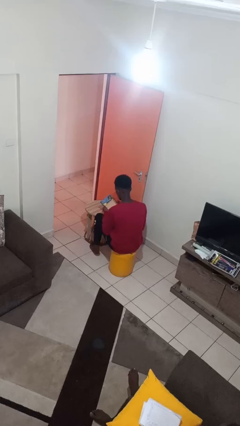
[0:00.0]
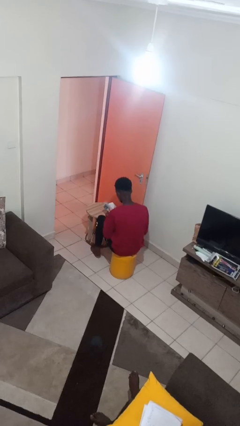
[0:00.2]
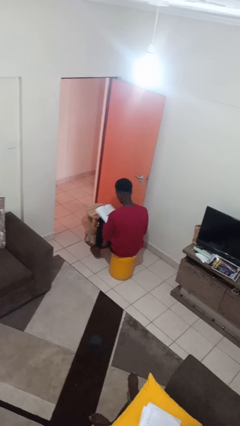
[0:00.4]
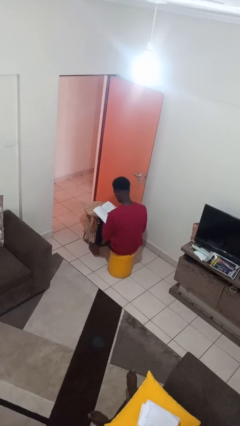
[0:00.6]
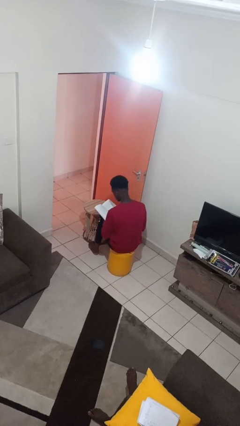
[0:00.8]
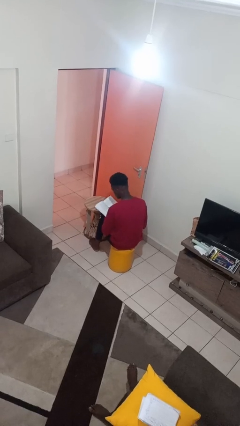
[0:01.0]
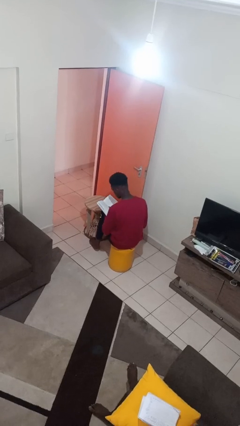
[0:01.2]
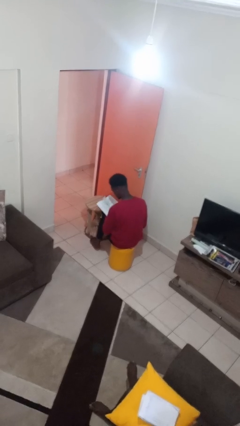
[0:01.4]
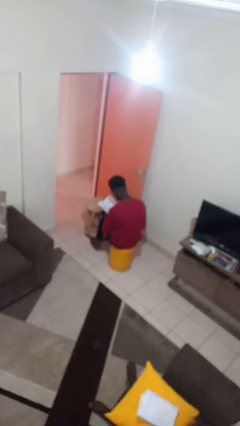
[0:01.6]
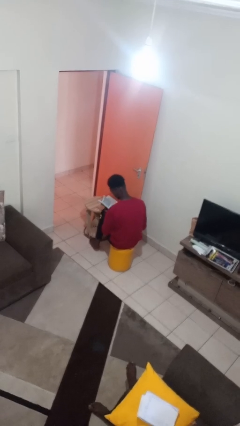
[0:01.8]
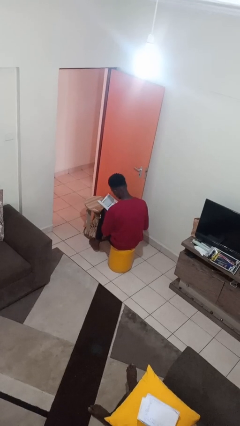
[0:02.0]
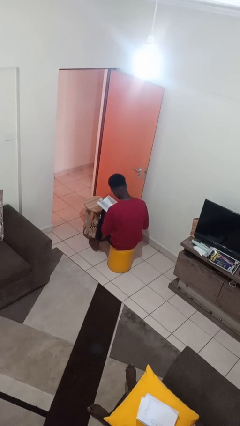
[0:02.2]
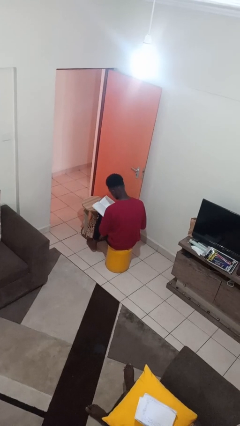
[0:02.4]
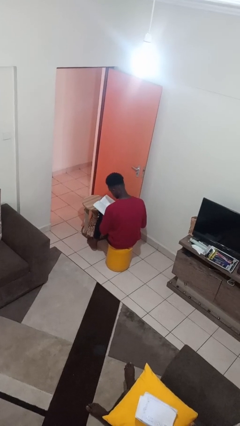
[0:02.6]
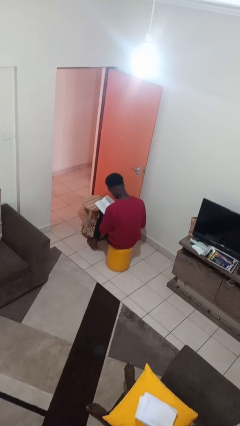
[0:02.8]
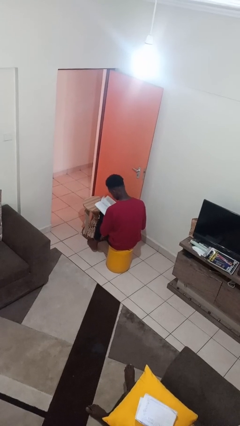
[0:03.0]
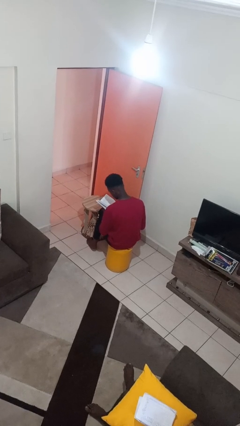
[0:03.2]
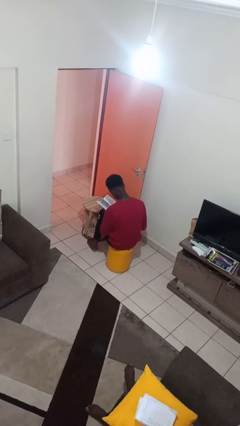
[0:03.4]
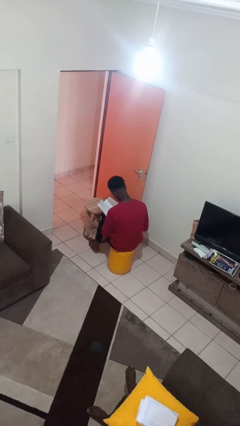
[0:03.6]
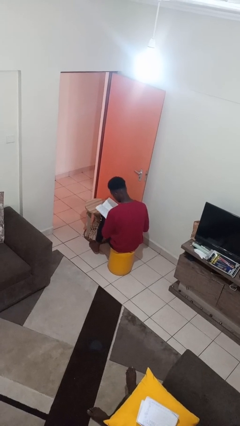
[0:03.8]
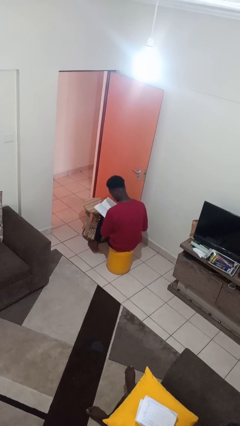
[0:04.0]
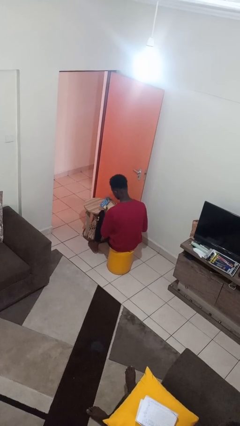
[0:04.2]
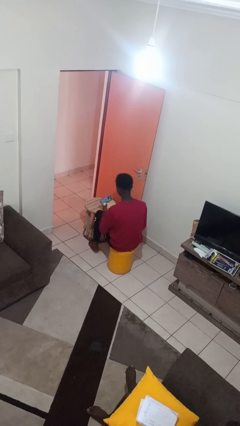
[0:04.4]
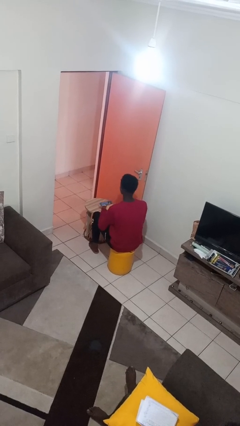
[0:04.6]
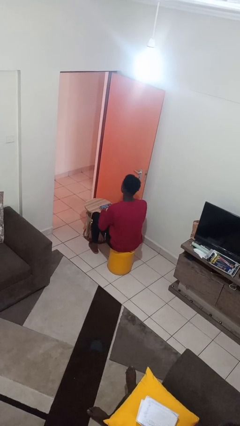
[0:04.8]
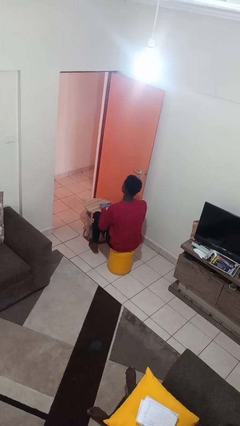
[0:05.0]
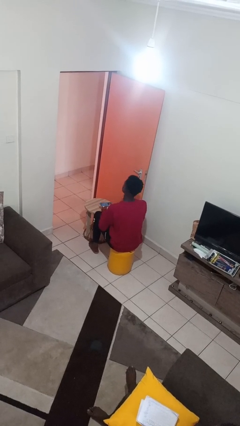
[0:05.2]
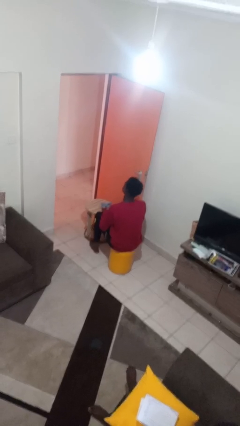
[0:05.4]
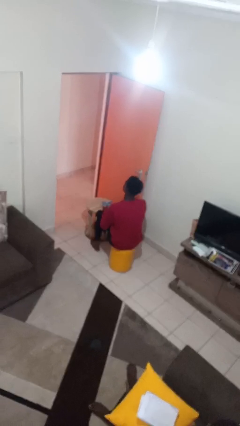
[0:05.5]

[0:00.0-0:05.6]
person reads book

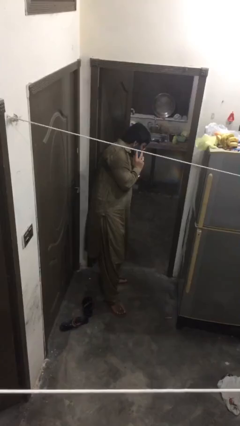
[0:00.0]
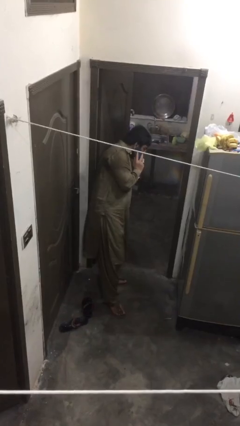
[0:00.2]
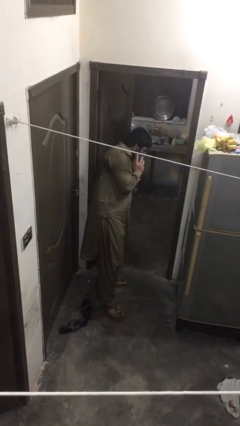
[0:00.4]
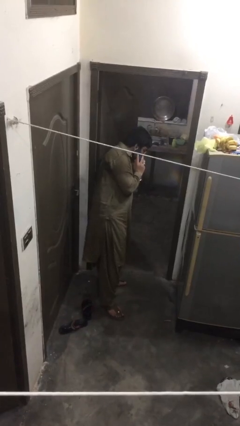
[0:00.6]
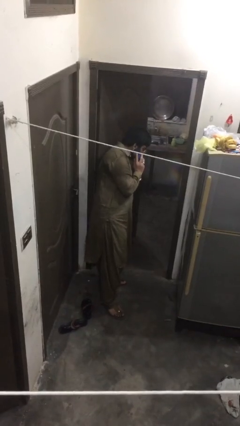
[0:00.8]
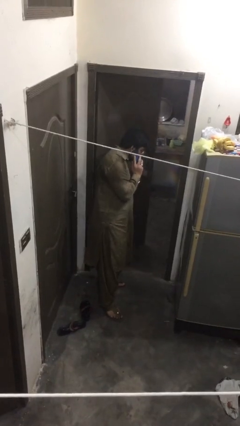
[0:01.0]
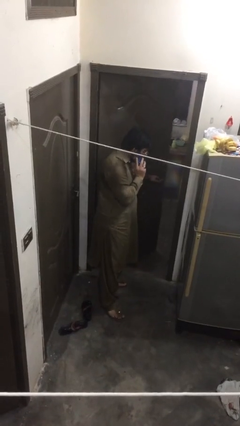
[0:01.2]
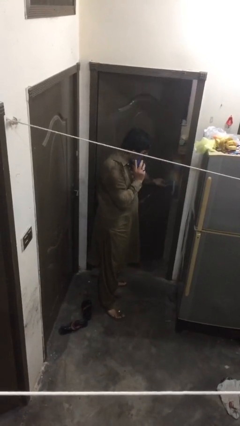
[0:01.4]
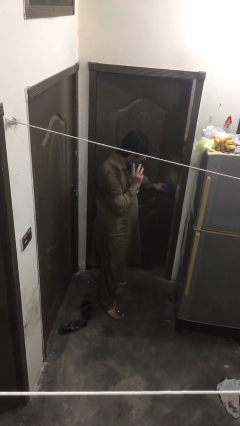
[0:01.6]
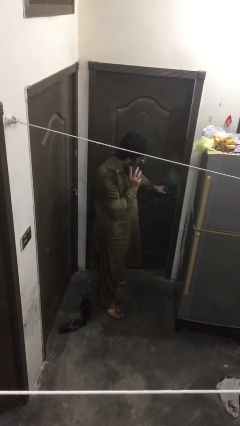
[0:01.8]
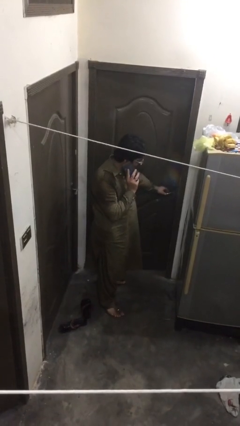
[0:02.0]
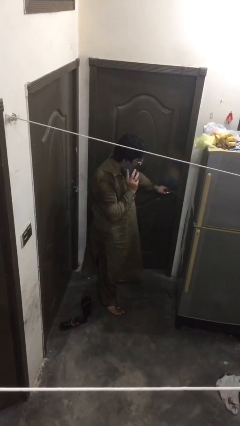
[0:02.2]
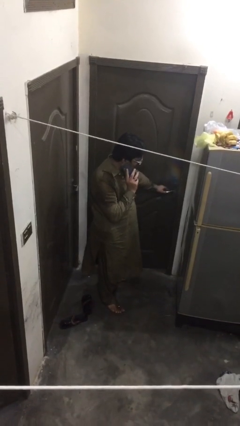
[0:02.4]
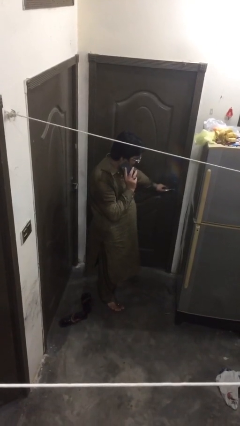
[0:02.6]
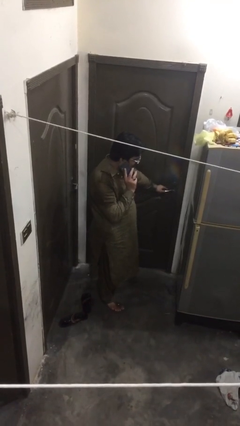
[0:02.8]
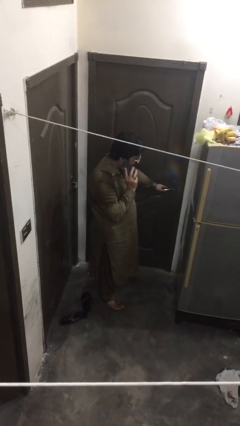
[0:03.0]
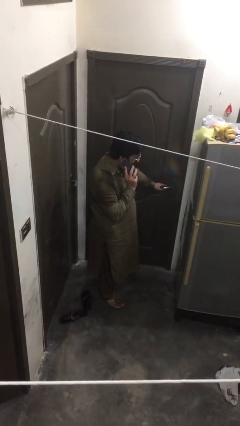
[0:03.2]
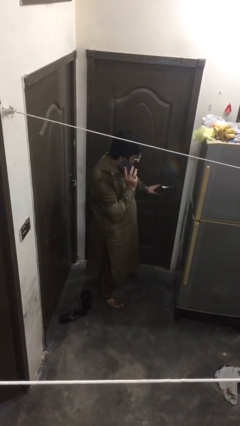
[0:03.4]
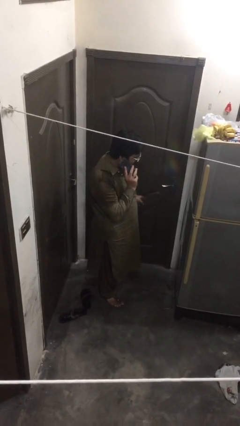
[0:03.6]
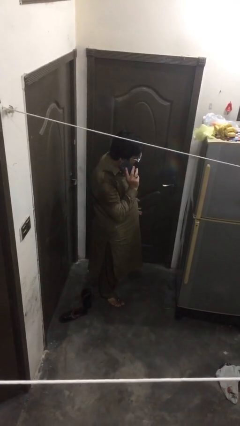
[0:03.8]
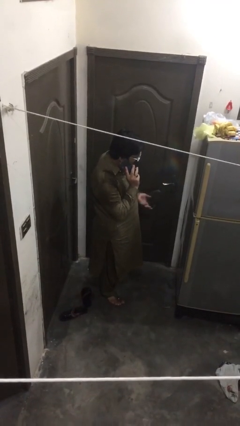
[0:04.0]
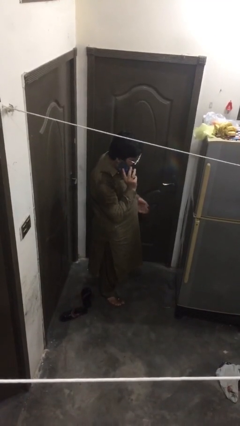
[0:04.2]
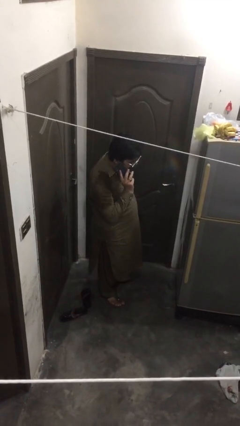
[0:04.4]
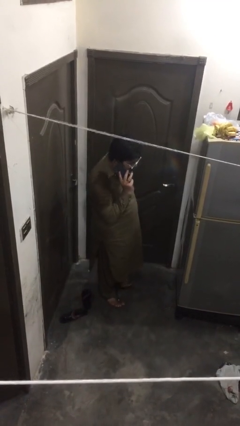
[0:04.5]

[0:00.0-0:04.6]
person closes facility door

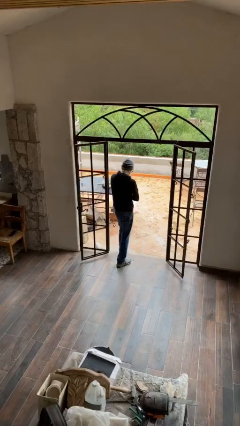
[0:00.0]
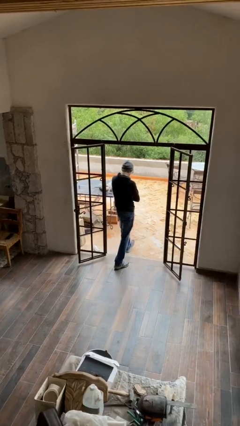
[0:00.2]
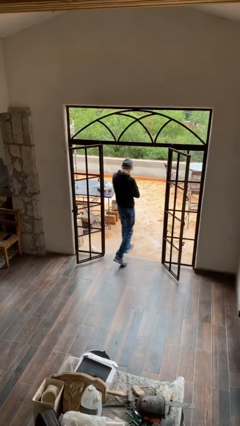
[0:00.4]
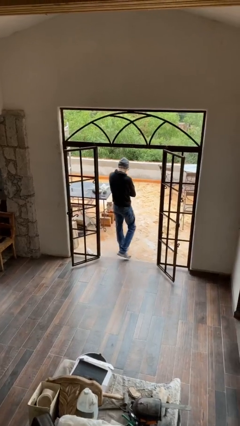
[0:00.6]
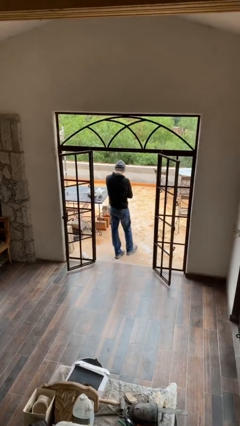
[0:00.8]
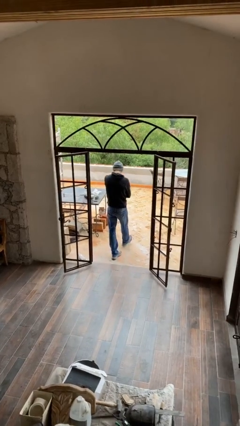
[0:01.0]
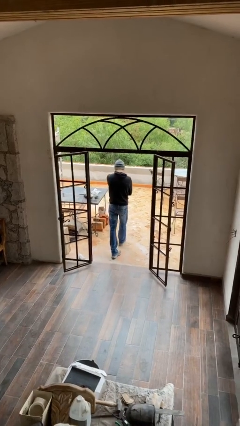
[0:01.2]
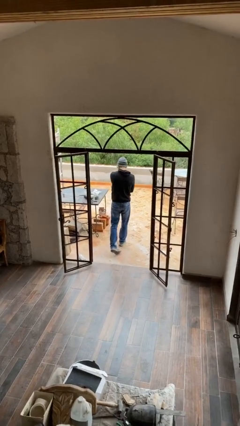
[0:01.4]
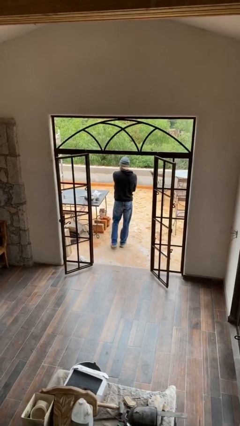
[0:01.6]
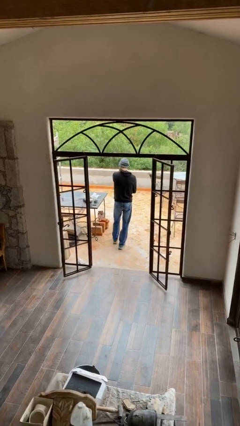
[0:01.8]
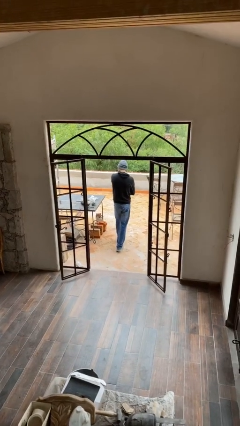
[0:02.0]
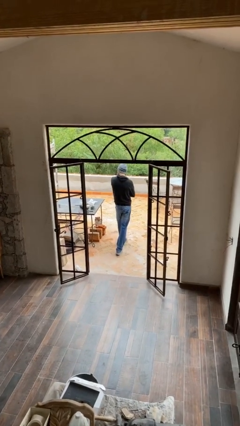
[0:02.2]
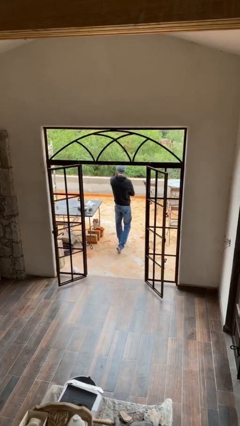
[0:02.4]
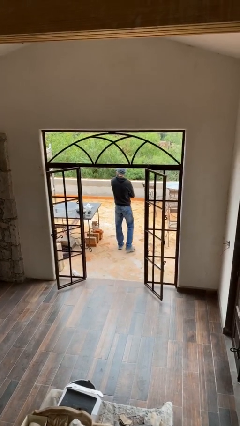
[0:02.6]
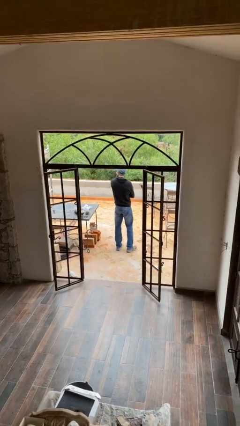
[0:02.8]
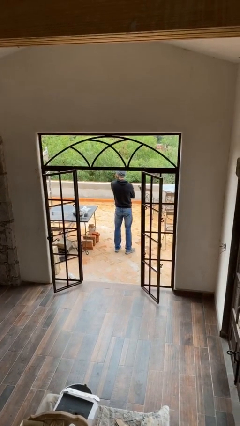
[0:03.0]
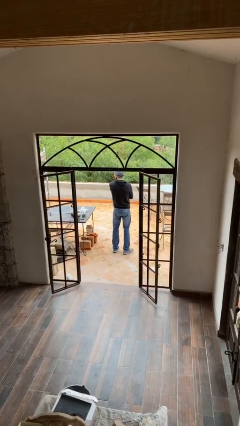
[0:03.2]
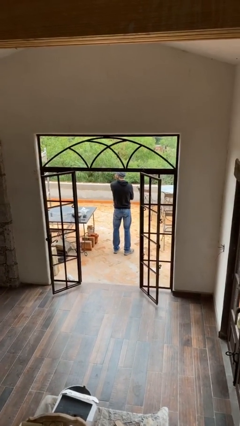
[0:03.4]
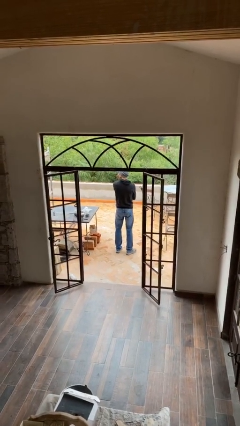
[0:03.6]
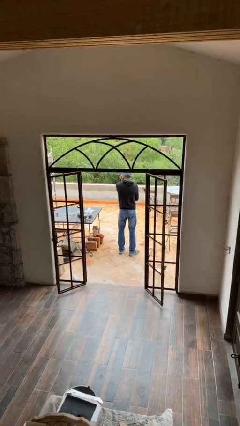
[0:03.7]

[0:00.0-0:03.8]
person exits scene through structure

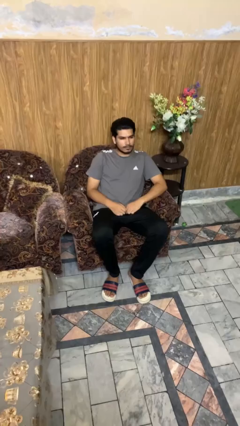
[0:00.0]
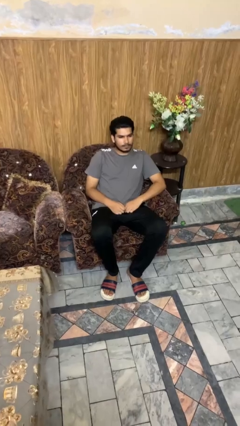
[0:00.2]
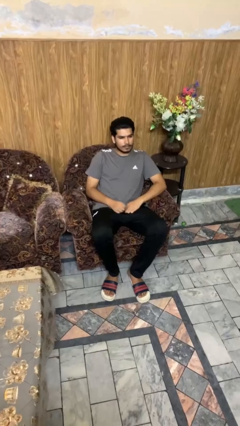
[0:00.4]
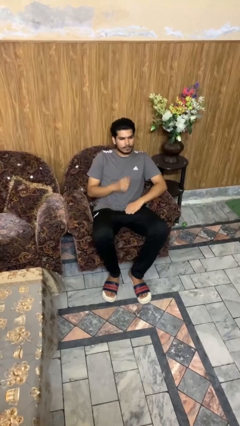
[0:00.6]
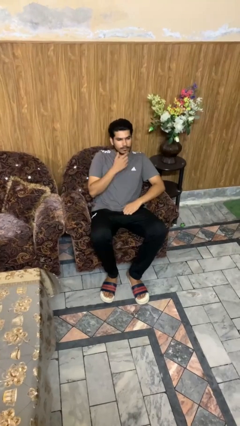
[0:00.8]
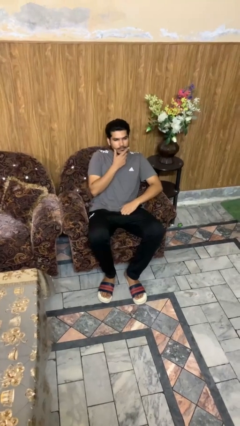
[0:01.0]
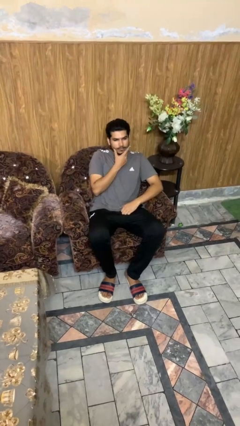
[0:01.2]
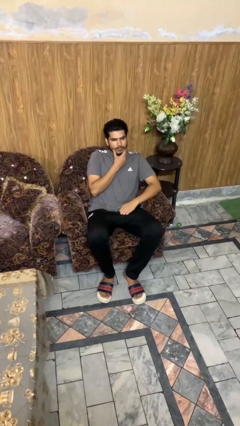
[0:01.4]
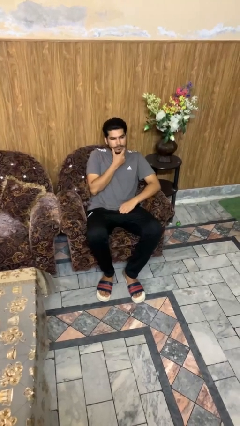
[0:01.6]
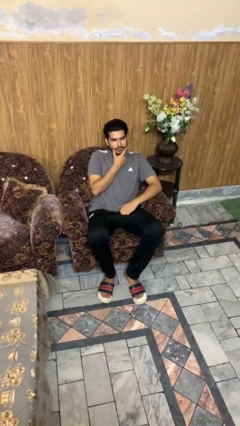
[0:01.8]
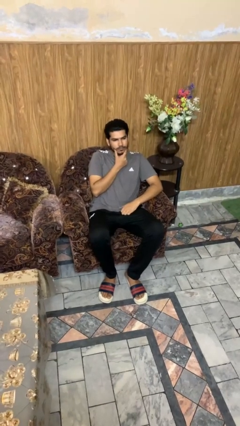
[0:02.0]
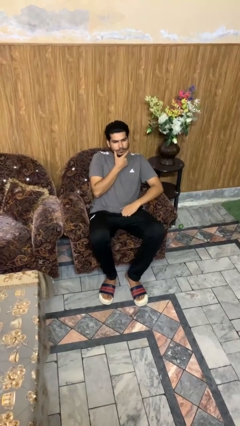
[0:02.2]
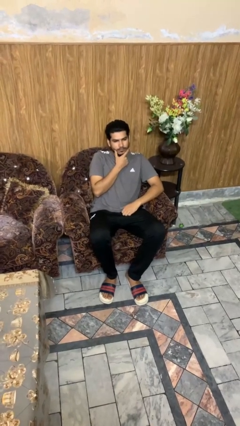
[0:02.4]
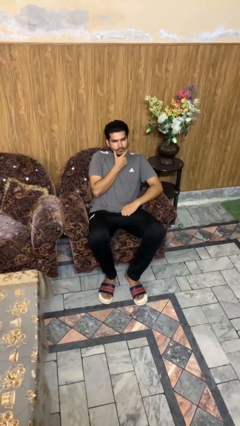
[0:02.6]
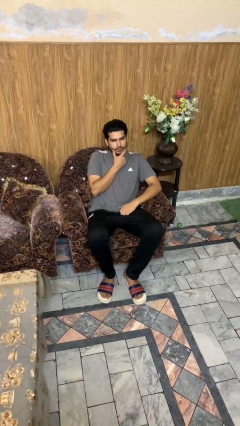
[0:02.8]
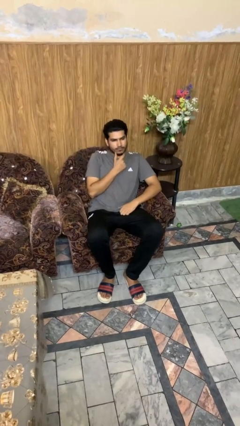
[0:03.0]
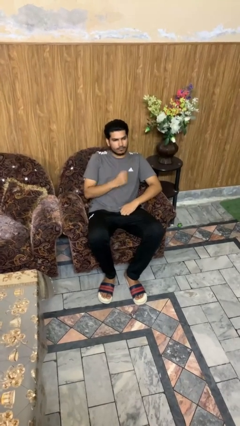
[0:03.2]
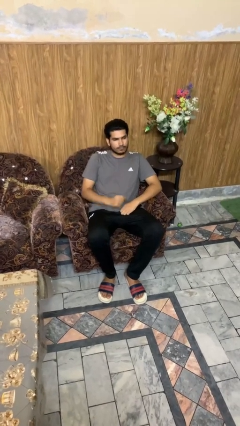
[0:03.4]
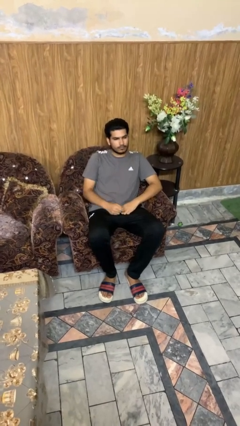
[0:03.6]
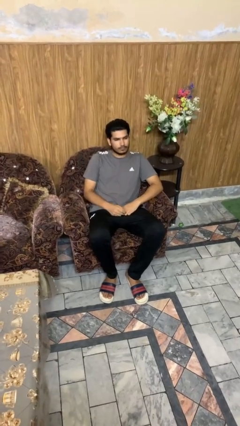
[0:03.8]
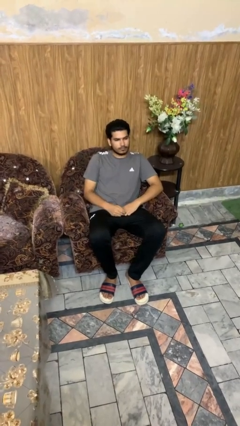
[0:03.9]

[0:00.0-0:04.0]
person strokes chin
